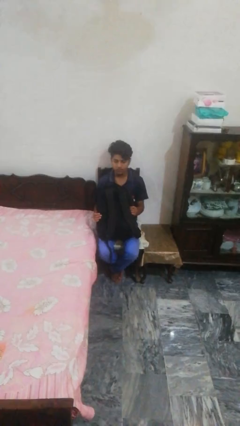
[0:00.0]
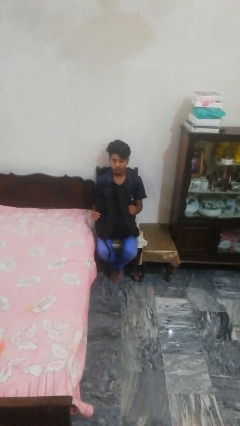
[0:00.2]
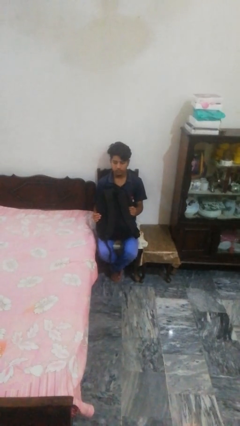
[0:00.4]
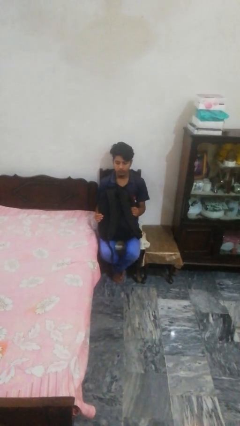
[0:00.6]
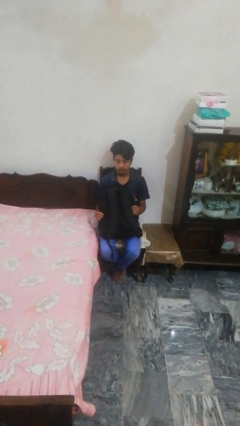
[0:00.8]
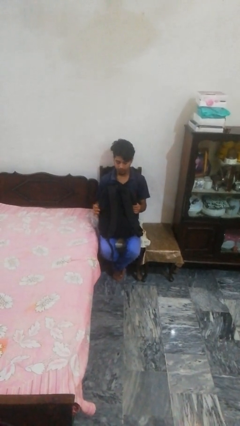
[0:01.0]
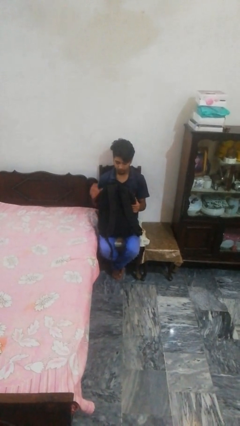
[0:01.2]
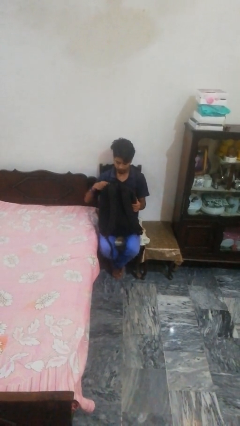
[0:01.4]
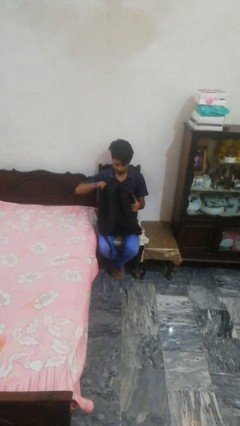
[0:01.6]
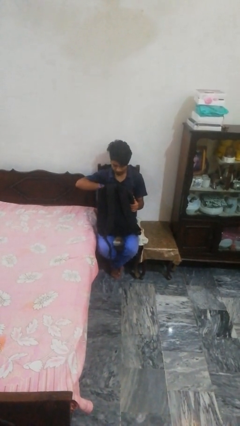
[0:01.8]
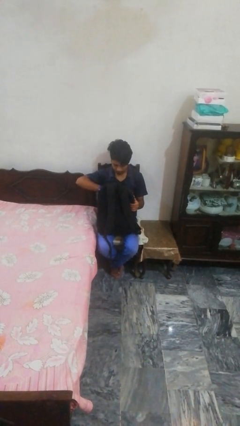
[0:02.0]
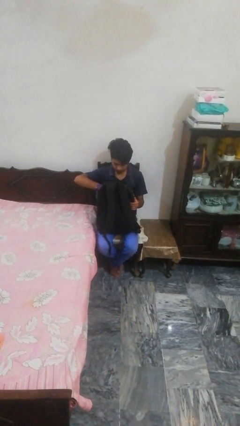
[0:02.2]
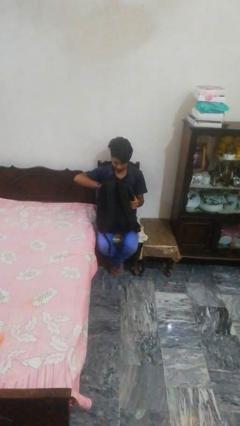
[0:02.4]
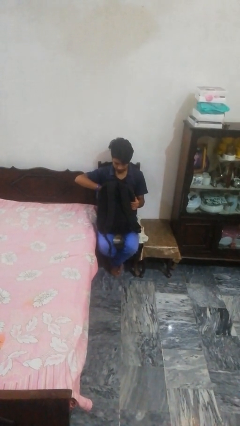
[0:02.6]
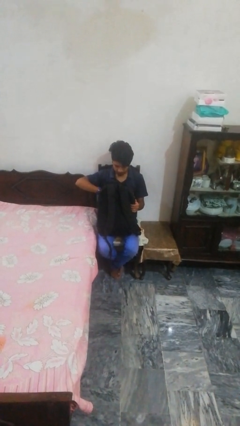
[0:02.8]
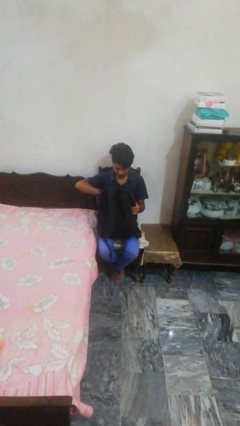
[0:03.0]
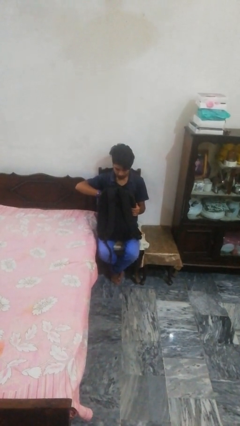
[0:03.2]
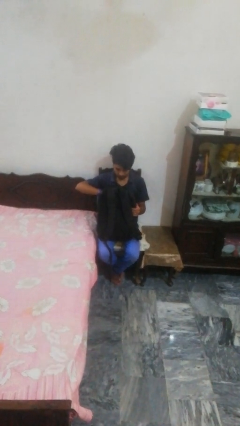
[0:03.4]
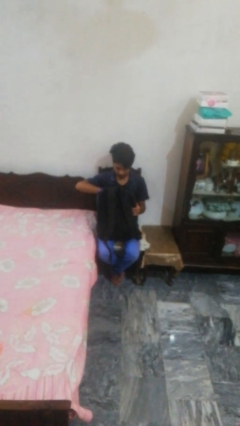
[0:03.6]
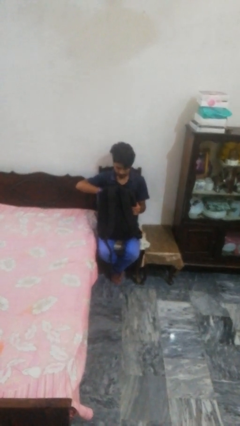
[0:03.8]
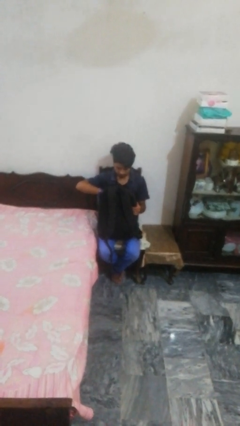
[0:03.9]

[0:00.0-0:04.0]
person searches in backpack

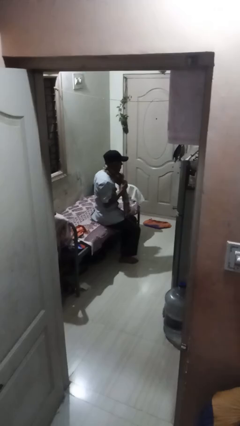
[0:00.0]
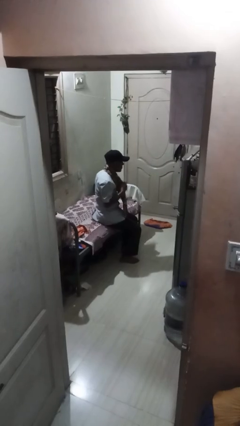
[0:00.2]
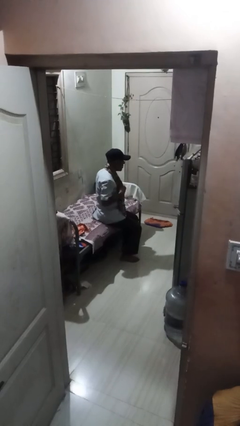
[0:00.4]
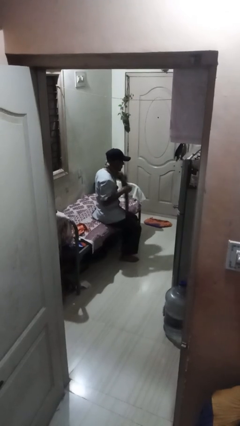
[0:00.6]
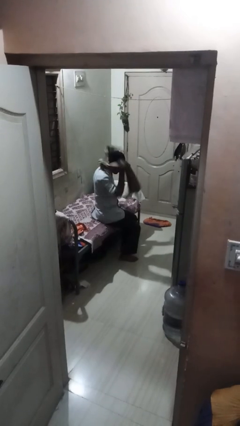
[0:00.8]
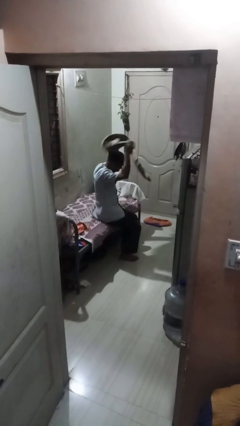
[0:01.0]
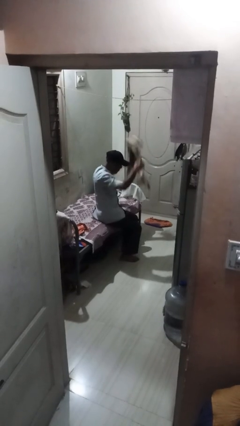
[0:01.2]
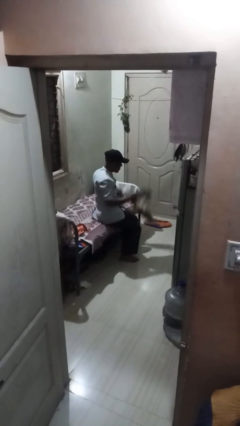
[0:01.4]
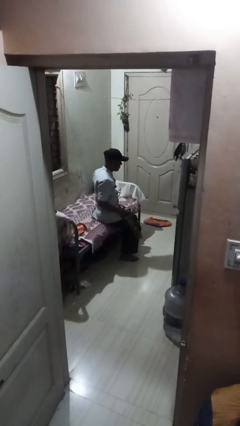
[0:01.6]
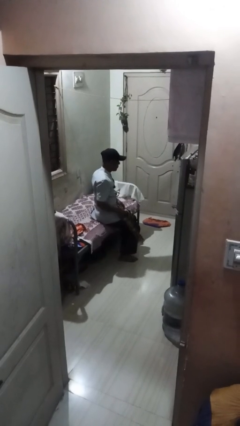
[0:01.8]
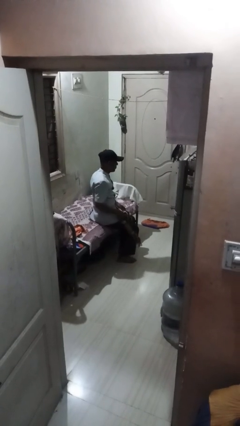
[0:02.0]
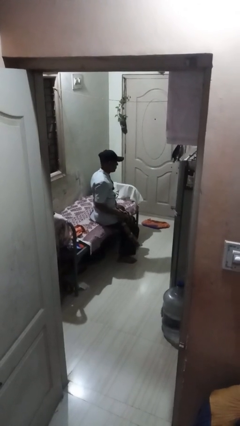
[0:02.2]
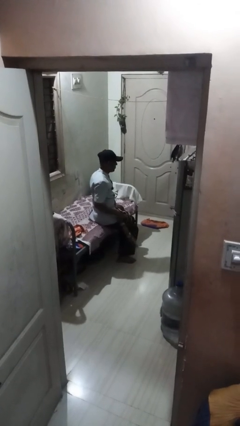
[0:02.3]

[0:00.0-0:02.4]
person takes off scarf

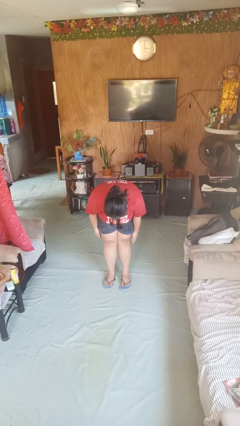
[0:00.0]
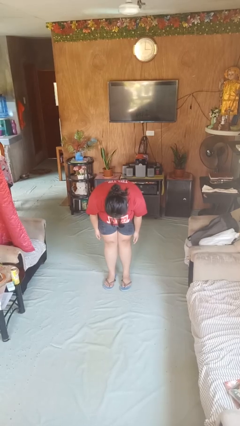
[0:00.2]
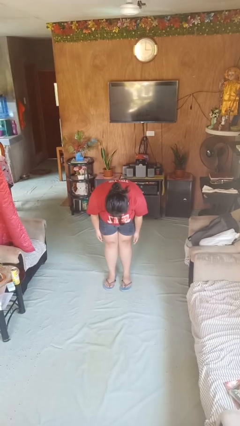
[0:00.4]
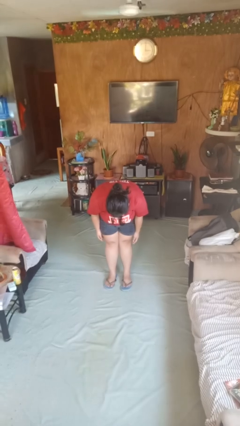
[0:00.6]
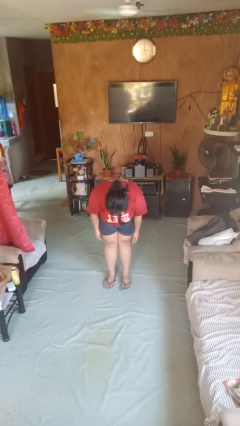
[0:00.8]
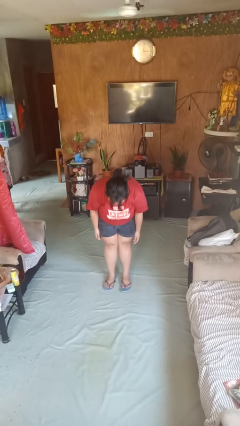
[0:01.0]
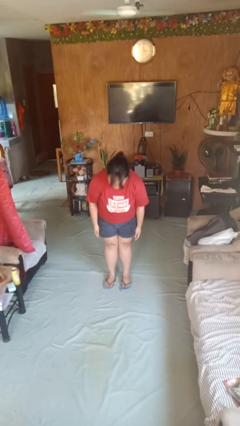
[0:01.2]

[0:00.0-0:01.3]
person bows

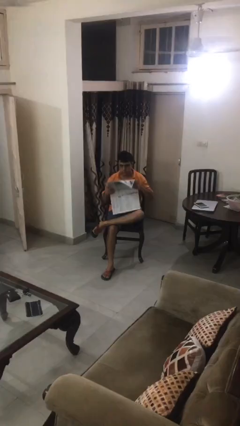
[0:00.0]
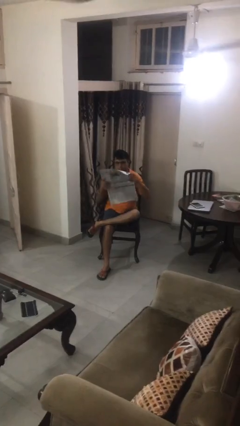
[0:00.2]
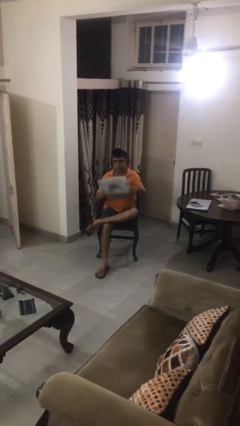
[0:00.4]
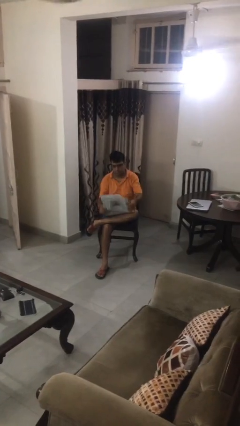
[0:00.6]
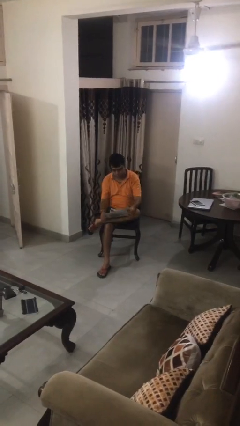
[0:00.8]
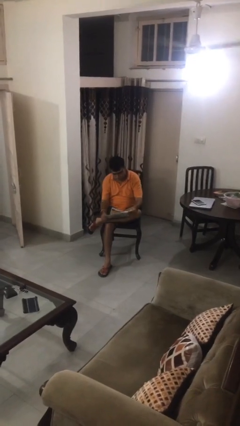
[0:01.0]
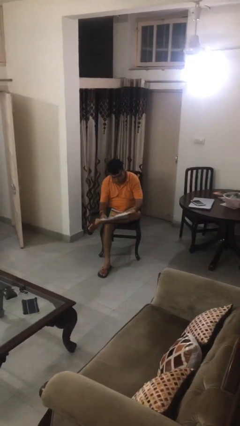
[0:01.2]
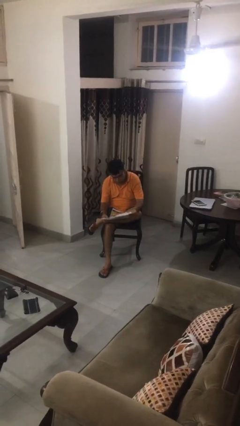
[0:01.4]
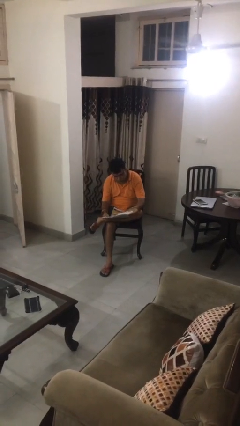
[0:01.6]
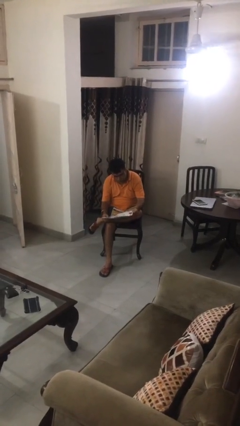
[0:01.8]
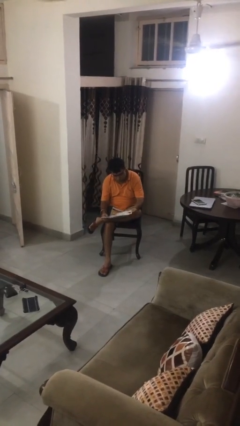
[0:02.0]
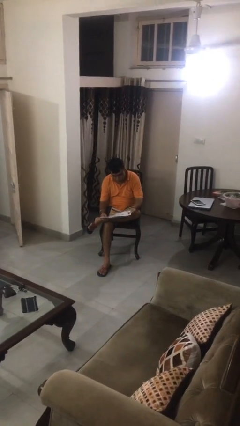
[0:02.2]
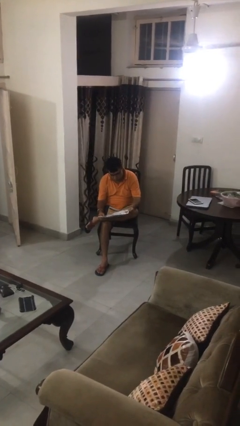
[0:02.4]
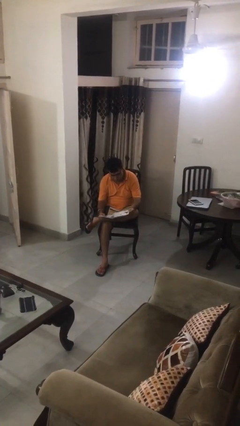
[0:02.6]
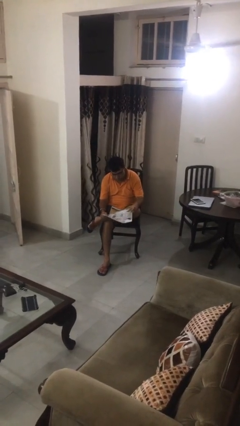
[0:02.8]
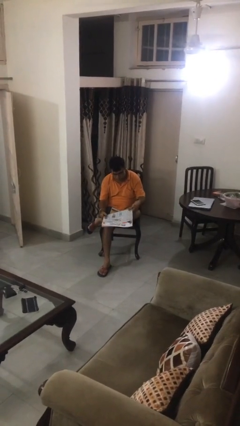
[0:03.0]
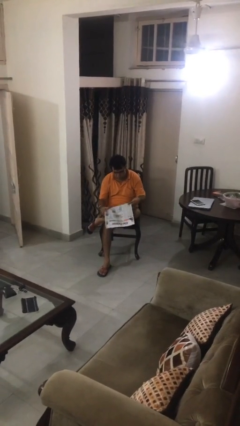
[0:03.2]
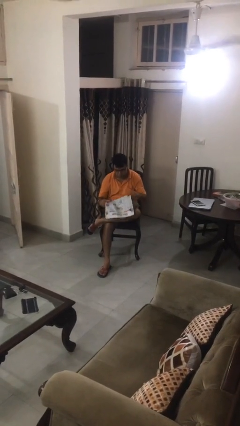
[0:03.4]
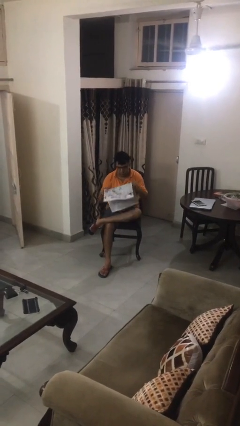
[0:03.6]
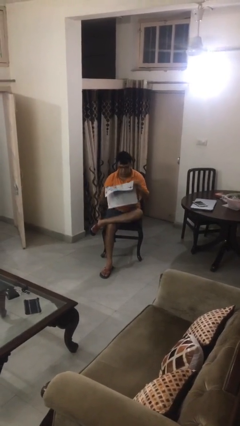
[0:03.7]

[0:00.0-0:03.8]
person reads newspaper

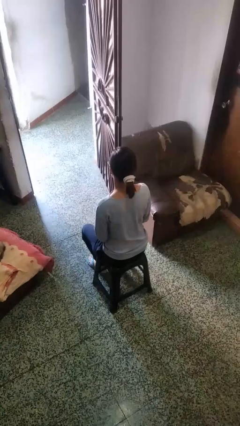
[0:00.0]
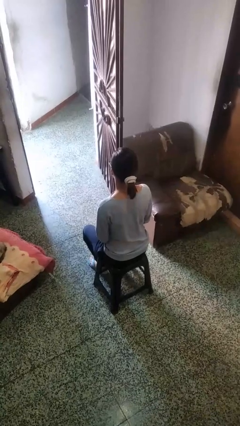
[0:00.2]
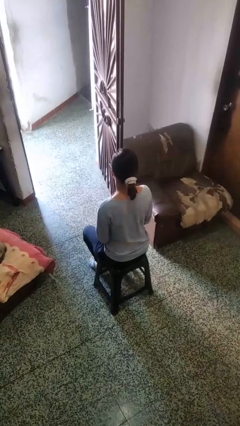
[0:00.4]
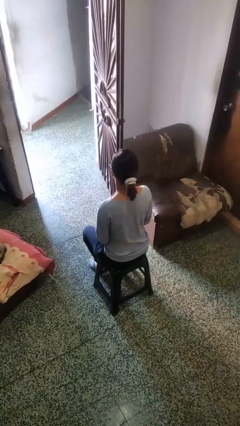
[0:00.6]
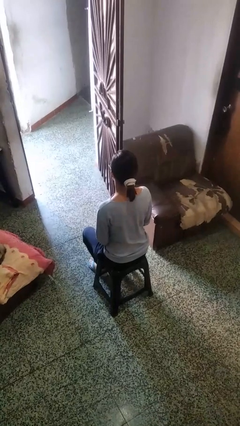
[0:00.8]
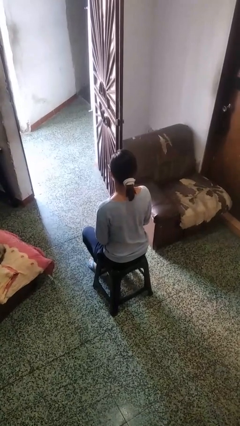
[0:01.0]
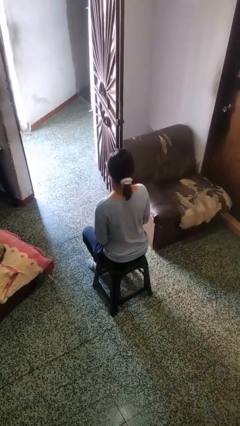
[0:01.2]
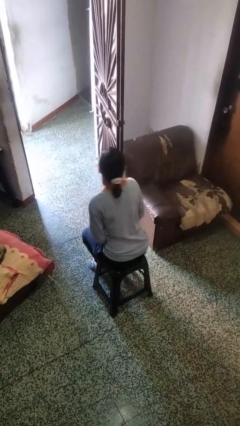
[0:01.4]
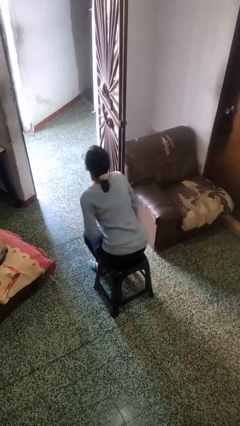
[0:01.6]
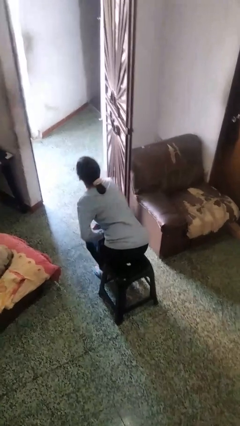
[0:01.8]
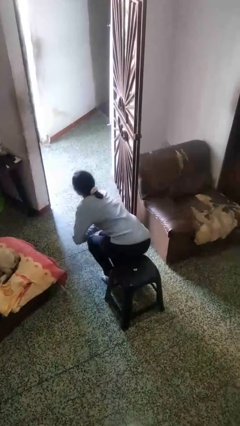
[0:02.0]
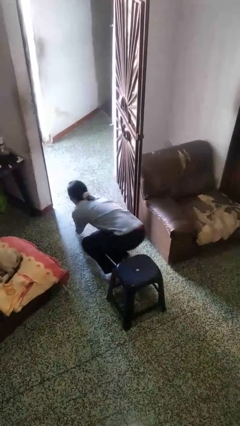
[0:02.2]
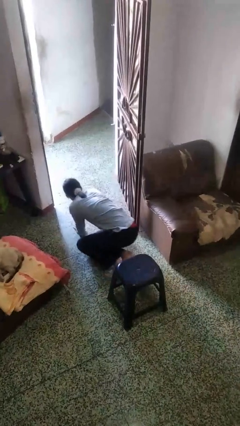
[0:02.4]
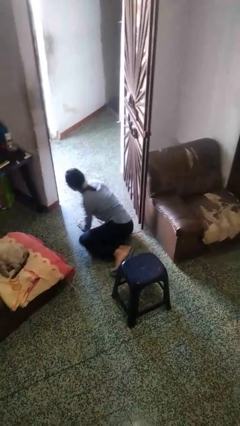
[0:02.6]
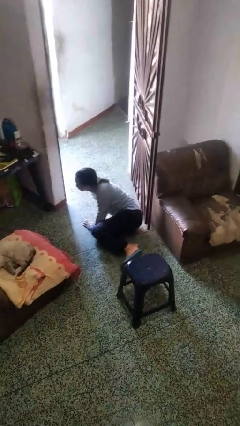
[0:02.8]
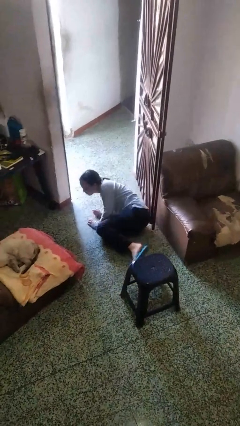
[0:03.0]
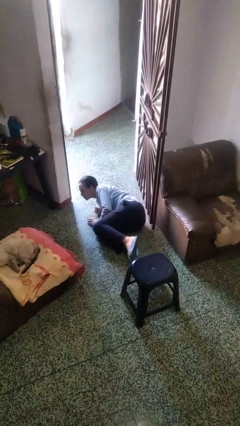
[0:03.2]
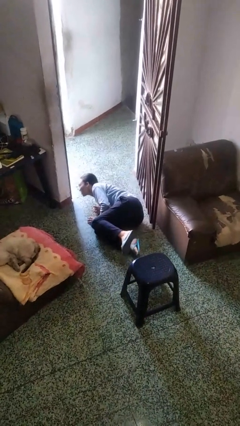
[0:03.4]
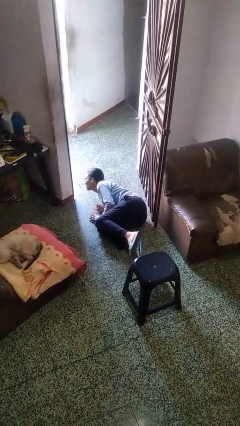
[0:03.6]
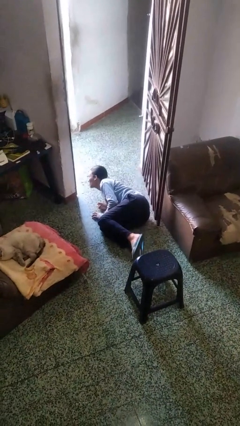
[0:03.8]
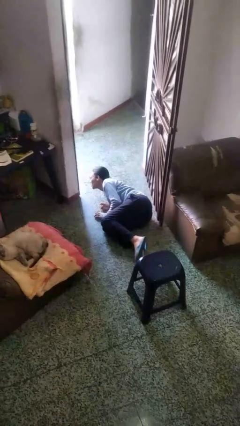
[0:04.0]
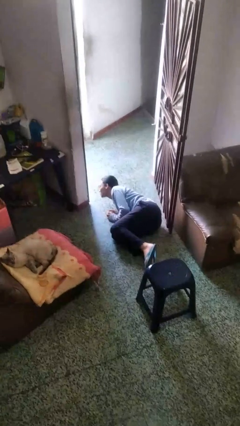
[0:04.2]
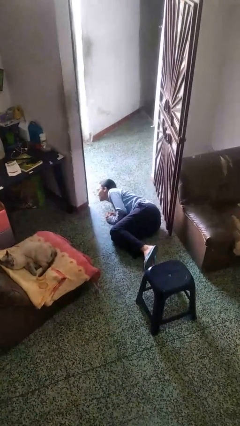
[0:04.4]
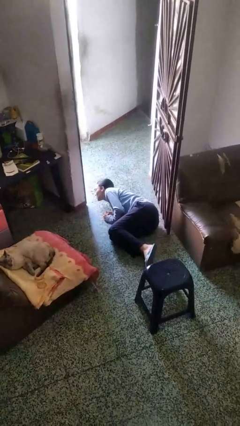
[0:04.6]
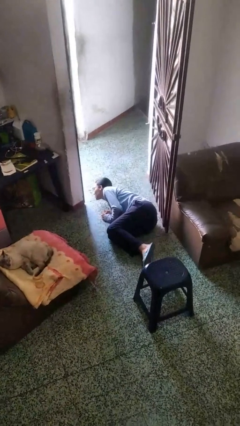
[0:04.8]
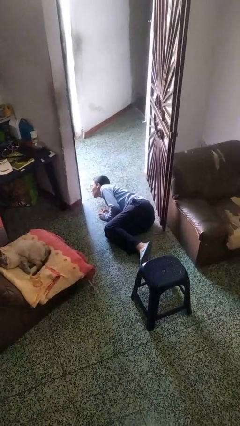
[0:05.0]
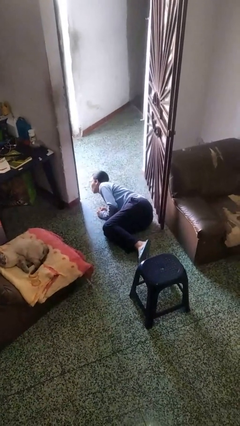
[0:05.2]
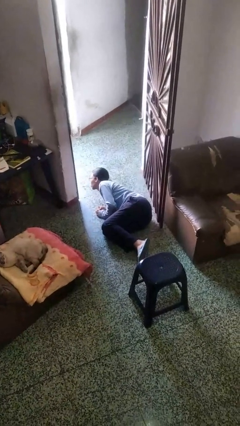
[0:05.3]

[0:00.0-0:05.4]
person falls from chair

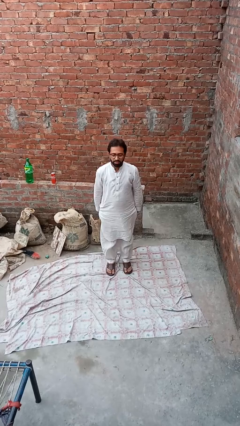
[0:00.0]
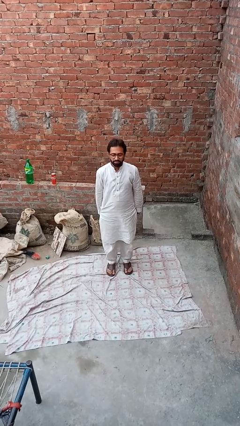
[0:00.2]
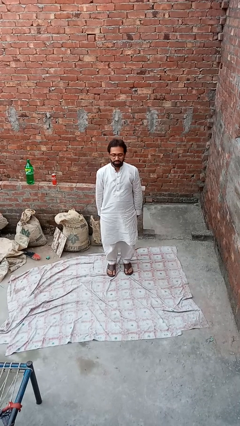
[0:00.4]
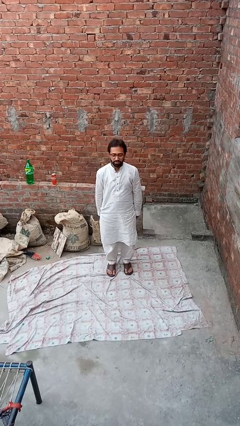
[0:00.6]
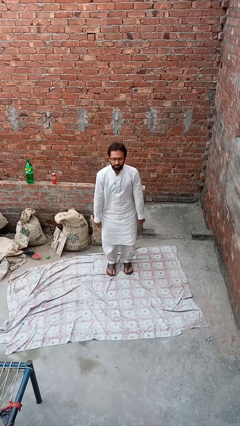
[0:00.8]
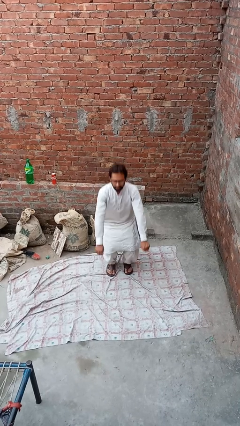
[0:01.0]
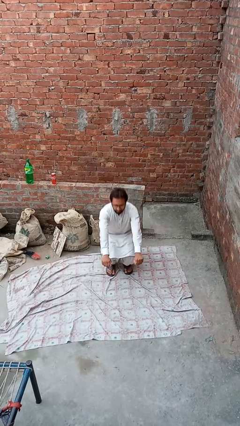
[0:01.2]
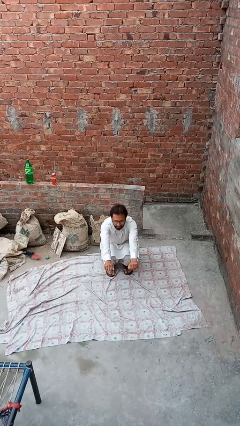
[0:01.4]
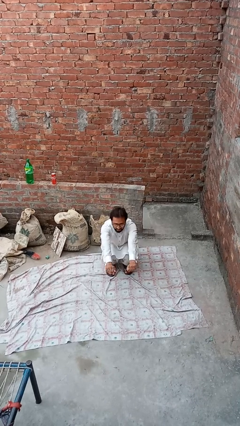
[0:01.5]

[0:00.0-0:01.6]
person squats
